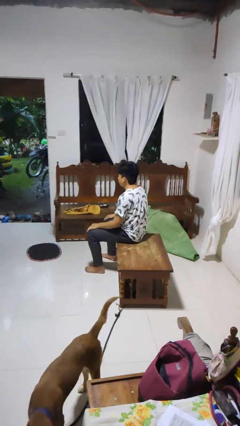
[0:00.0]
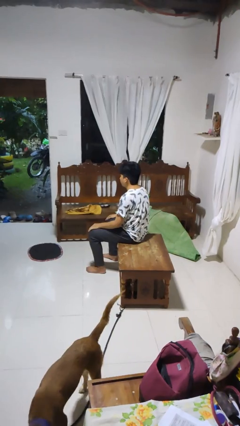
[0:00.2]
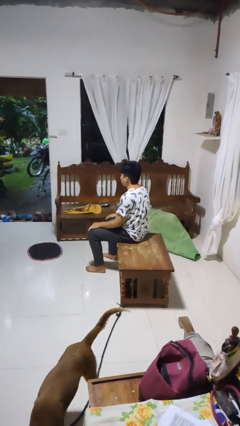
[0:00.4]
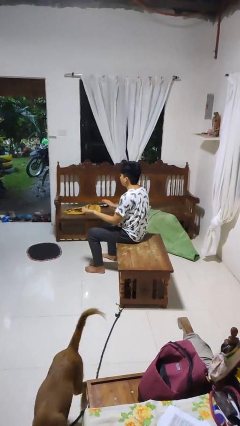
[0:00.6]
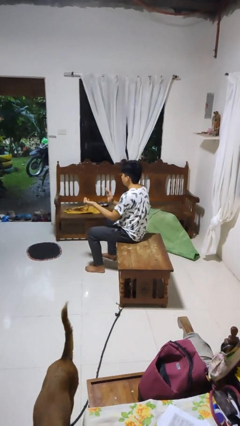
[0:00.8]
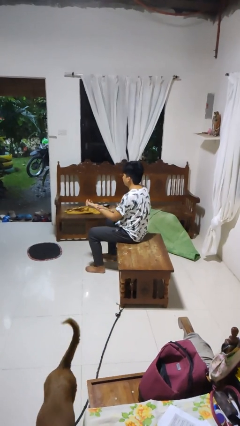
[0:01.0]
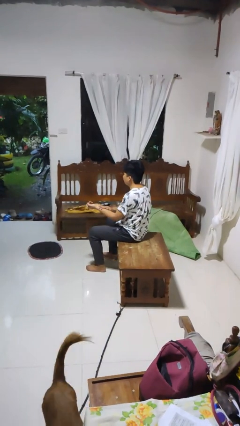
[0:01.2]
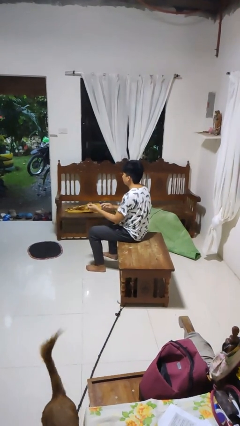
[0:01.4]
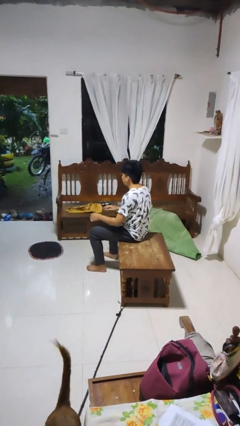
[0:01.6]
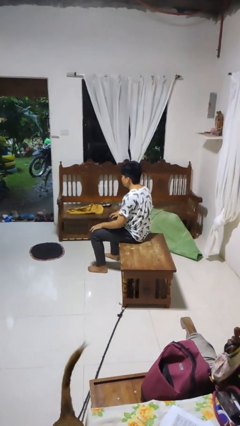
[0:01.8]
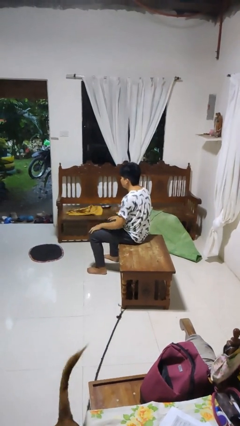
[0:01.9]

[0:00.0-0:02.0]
person swats bug

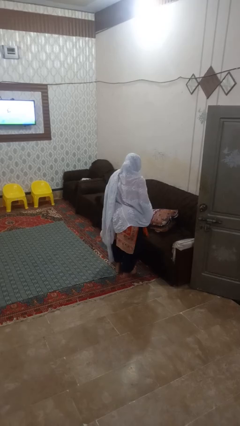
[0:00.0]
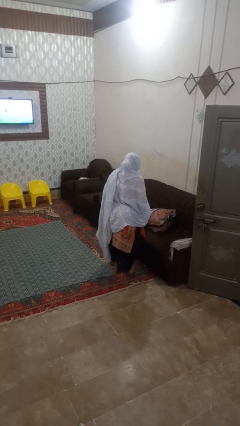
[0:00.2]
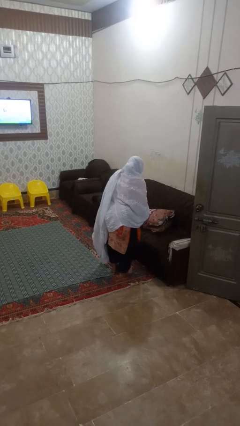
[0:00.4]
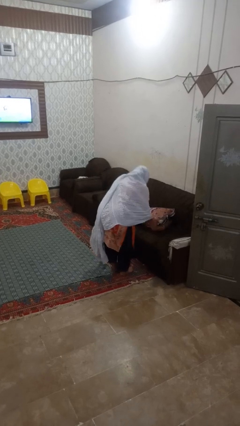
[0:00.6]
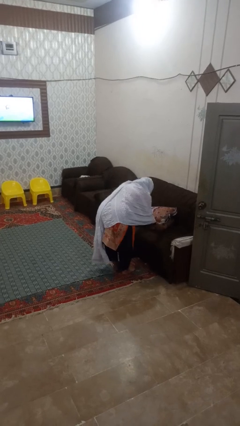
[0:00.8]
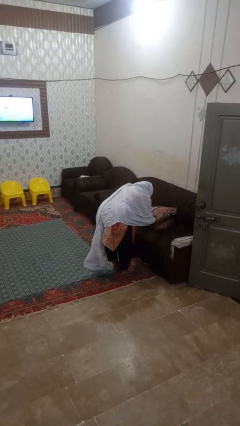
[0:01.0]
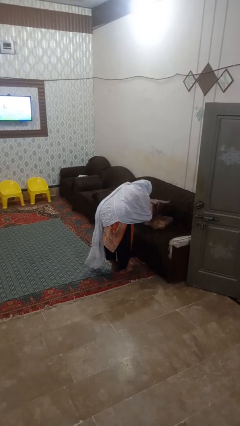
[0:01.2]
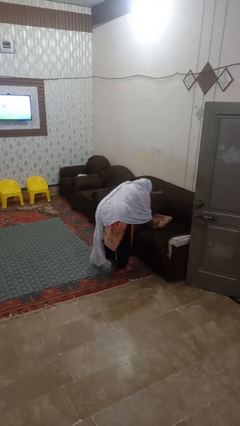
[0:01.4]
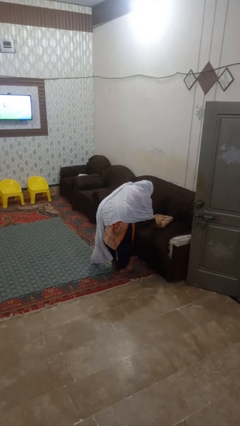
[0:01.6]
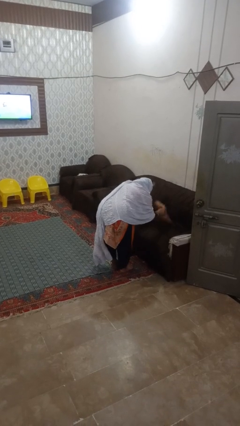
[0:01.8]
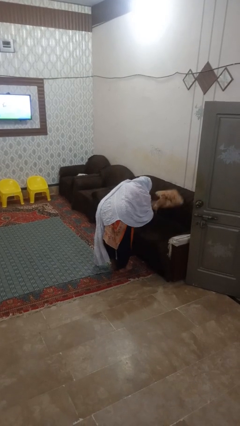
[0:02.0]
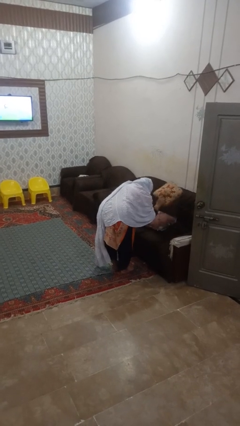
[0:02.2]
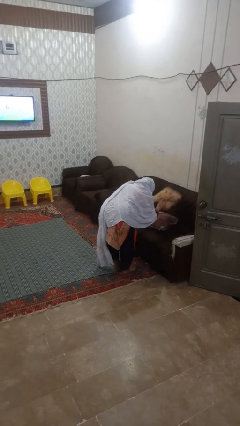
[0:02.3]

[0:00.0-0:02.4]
person searches in couch

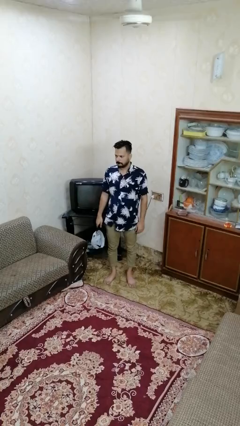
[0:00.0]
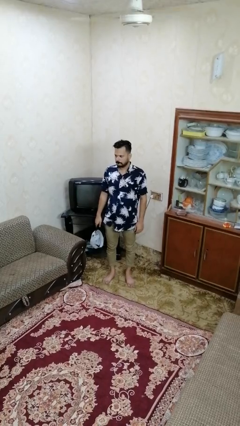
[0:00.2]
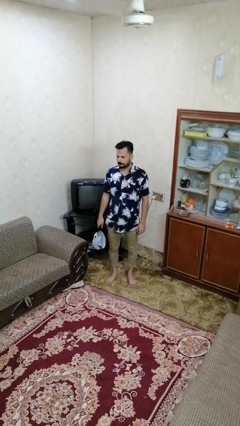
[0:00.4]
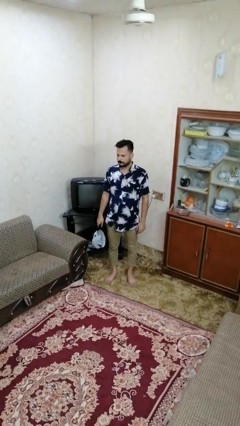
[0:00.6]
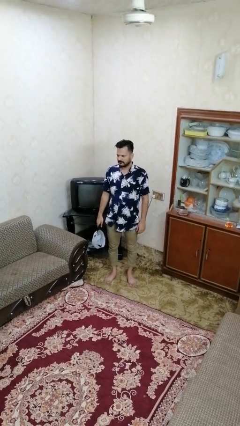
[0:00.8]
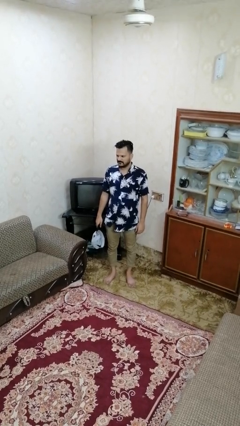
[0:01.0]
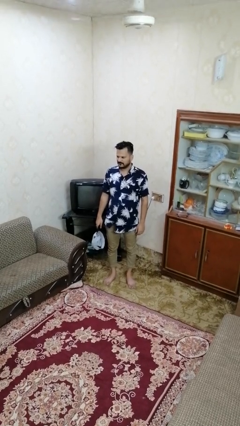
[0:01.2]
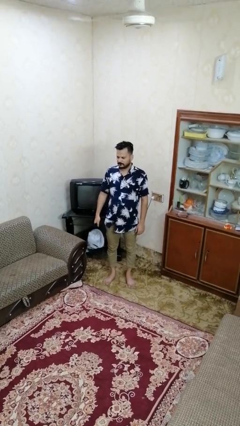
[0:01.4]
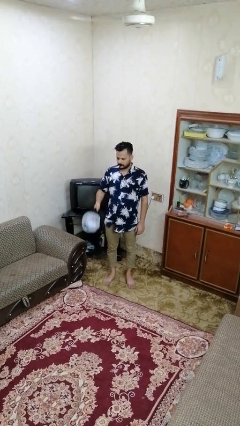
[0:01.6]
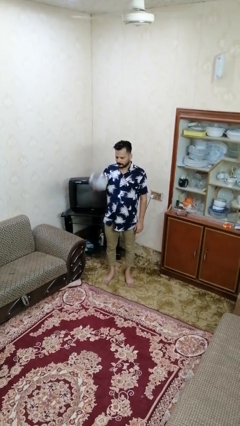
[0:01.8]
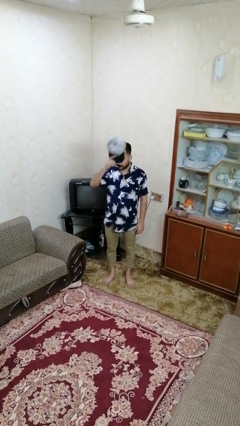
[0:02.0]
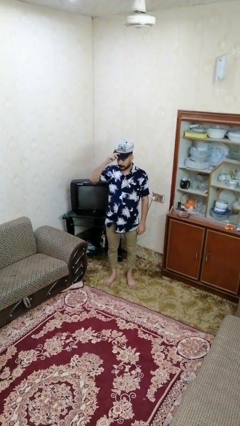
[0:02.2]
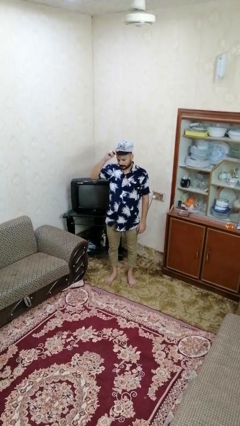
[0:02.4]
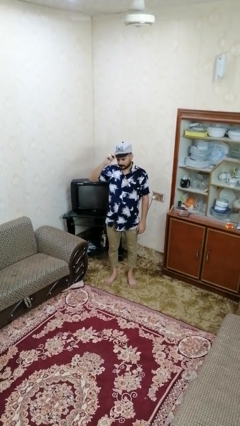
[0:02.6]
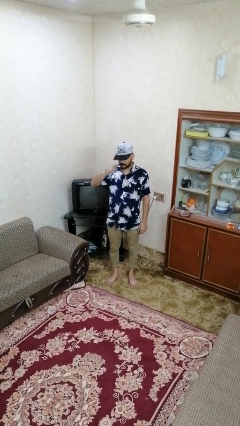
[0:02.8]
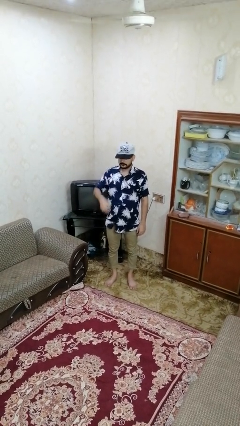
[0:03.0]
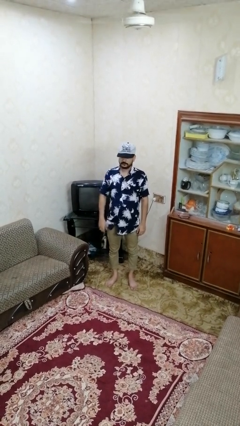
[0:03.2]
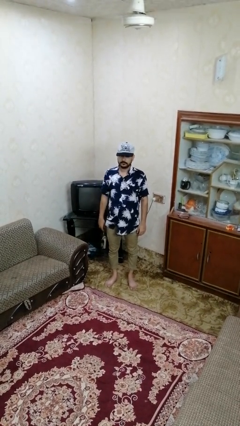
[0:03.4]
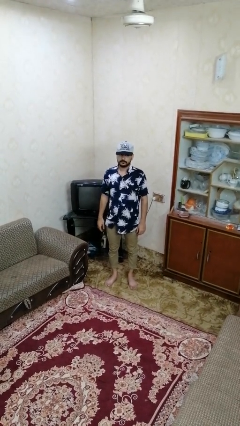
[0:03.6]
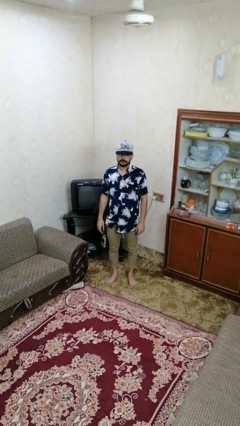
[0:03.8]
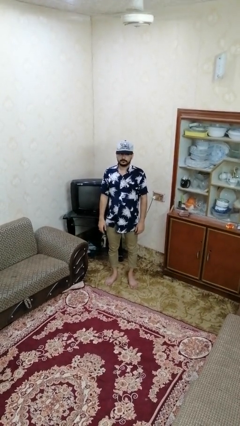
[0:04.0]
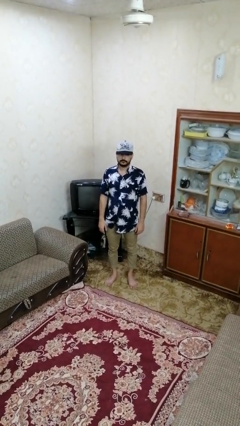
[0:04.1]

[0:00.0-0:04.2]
person puts on hat

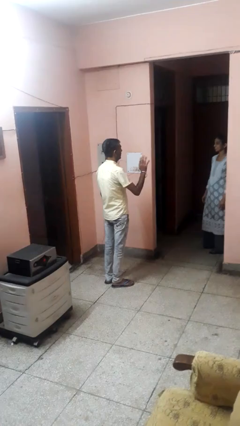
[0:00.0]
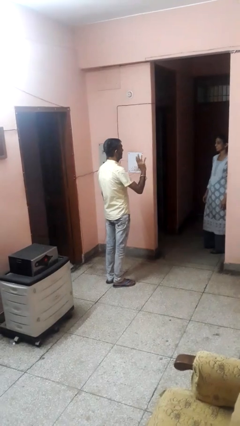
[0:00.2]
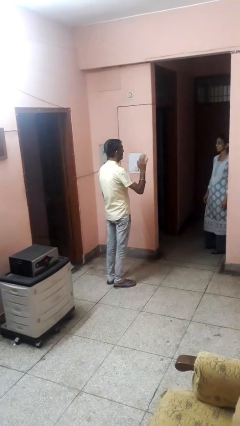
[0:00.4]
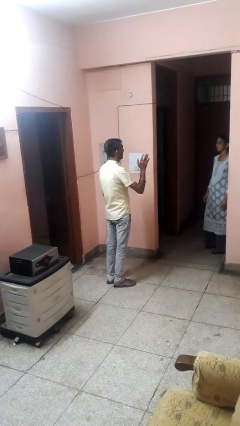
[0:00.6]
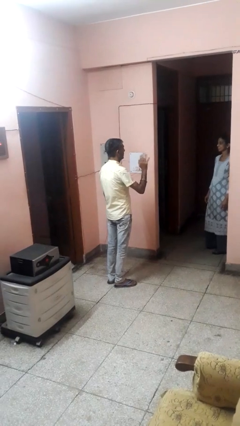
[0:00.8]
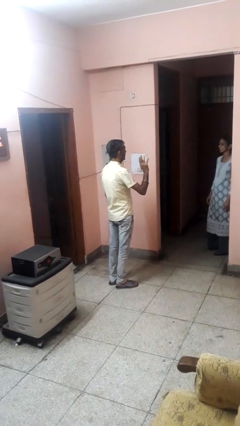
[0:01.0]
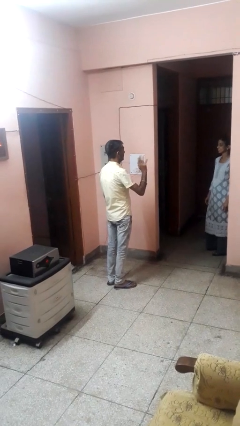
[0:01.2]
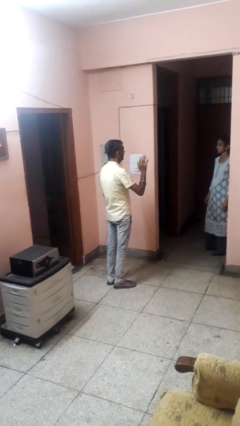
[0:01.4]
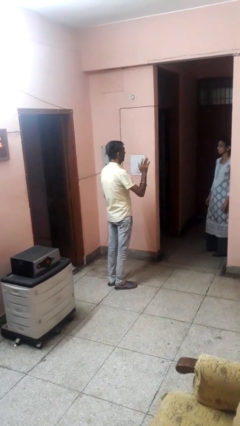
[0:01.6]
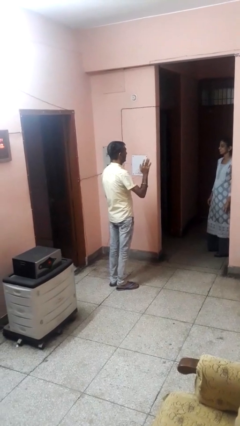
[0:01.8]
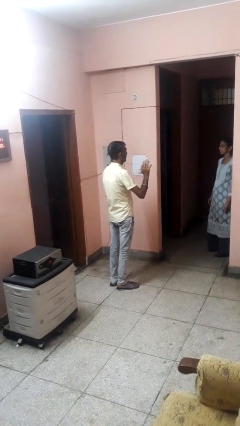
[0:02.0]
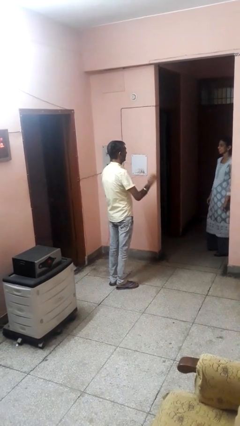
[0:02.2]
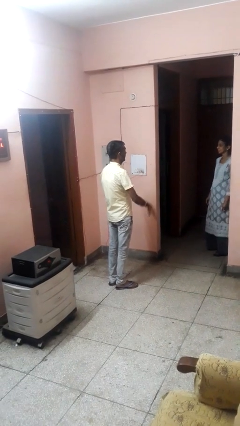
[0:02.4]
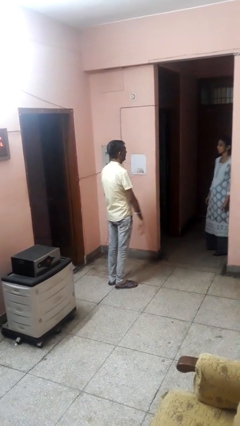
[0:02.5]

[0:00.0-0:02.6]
person waves at person

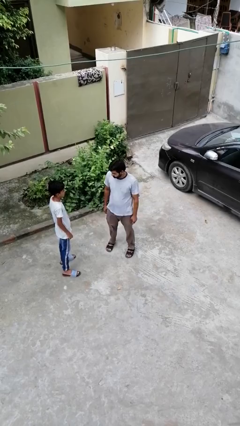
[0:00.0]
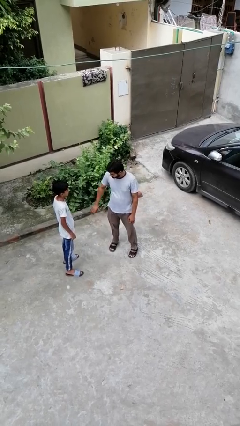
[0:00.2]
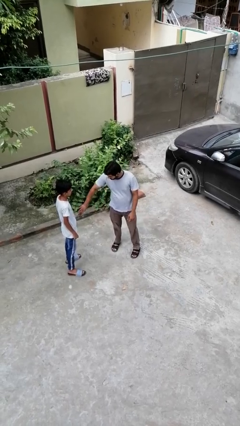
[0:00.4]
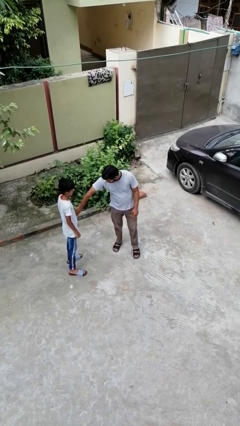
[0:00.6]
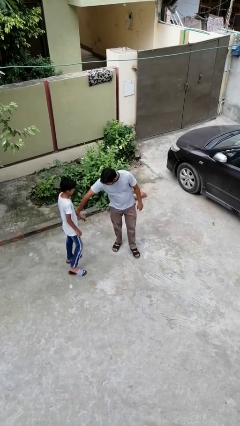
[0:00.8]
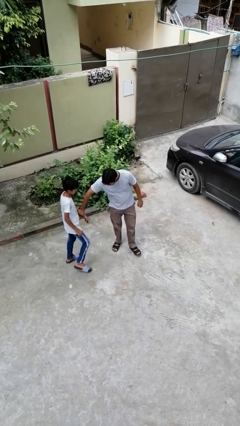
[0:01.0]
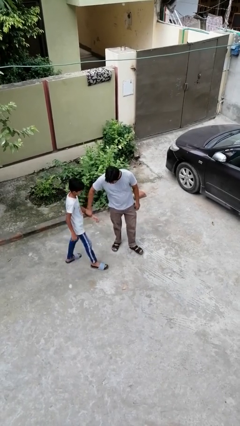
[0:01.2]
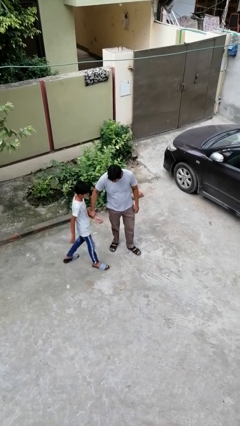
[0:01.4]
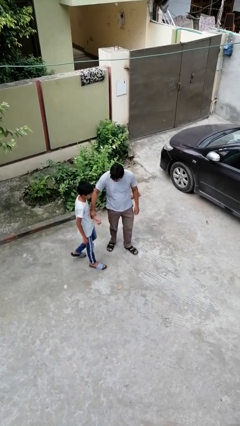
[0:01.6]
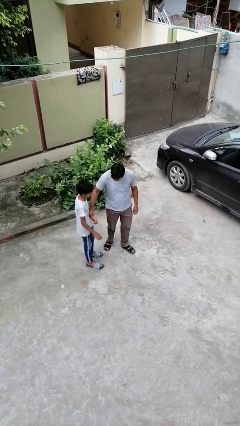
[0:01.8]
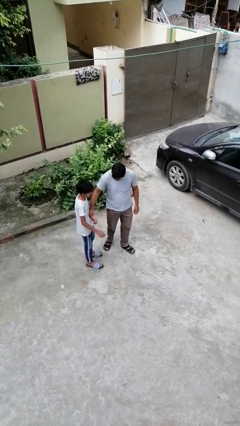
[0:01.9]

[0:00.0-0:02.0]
person grabs person by forearm

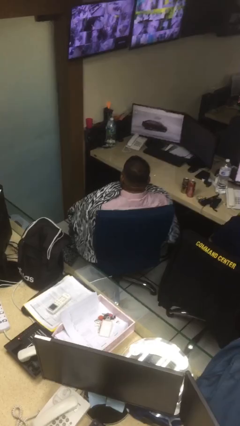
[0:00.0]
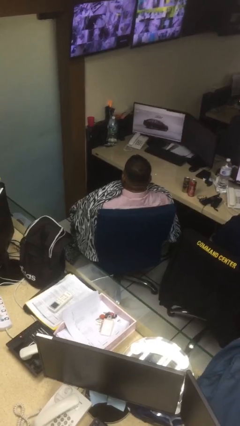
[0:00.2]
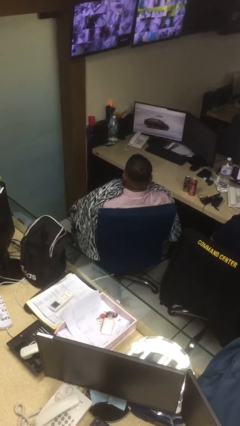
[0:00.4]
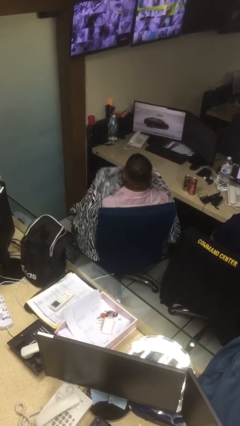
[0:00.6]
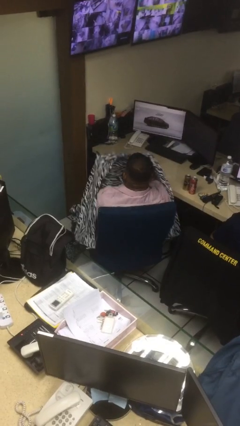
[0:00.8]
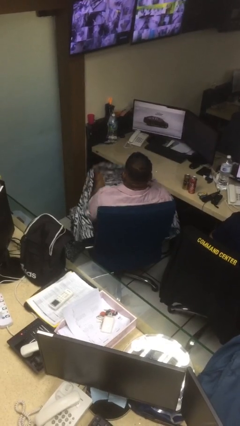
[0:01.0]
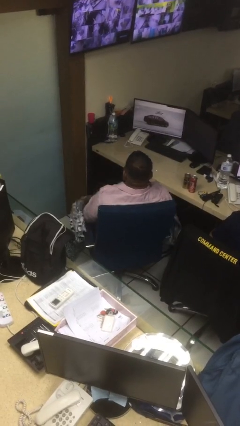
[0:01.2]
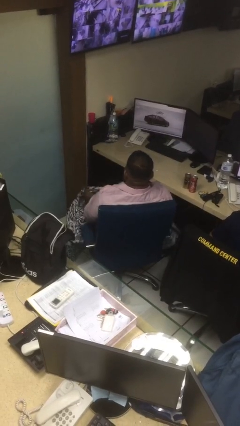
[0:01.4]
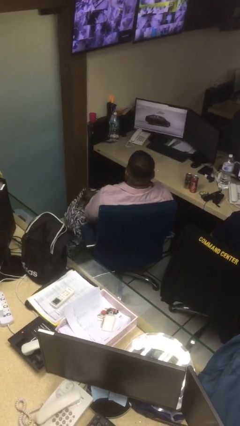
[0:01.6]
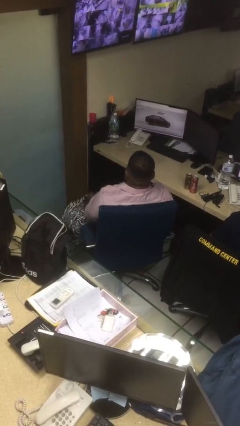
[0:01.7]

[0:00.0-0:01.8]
person uncovers with blanket

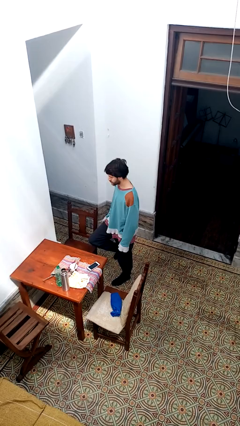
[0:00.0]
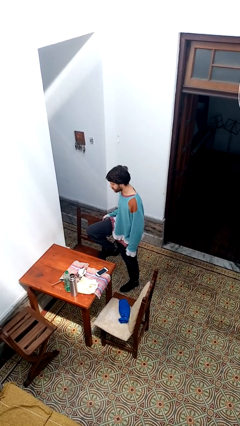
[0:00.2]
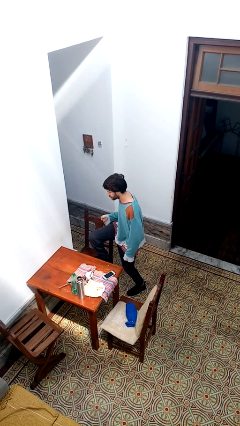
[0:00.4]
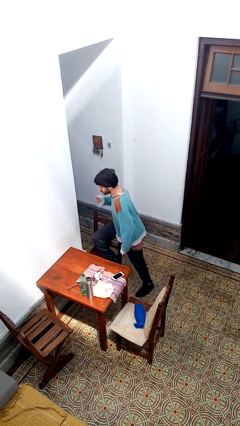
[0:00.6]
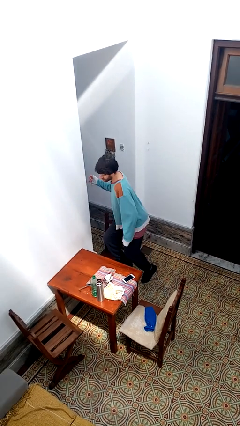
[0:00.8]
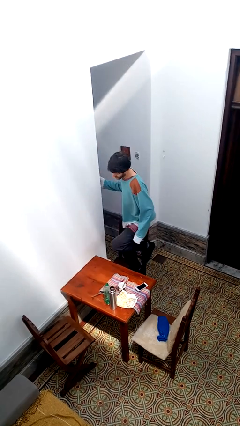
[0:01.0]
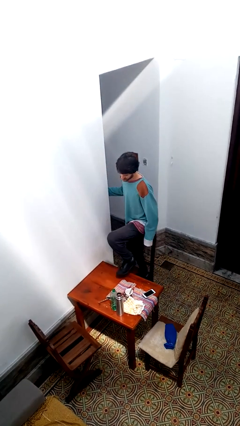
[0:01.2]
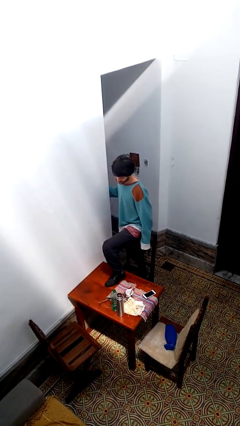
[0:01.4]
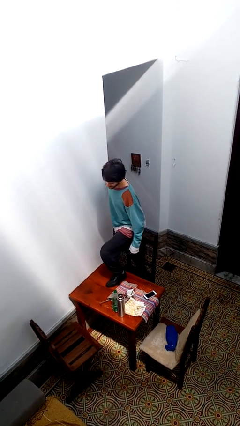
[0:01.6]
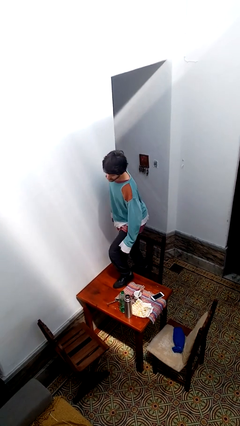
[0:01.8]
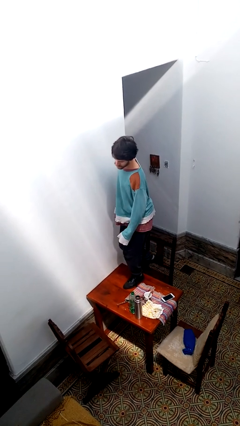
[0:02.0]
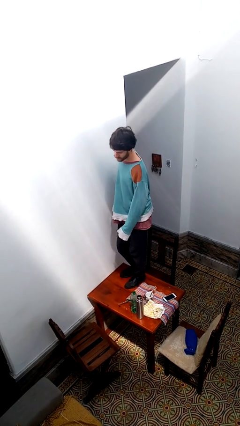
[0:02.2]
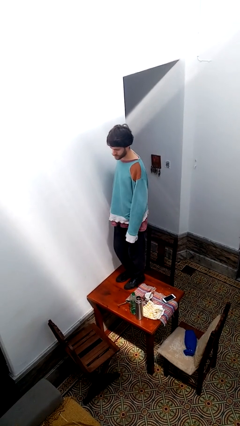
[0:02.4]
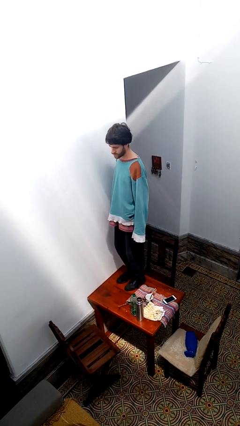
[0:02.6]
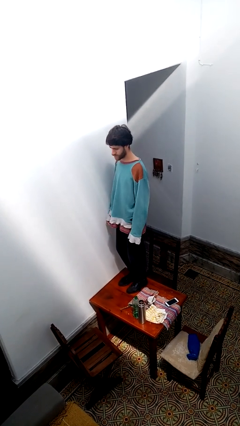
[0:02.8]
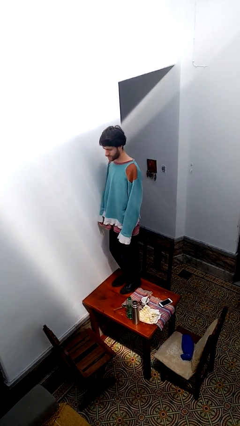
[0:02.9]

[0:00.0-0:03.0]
person climbs on table
